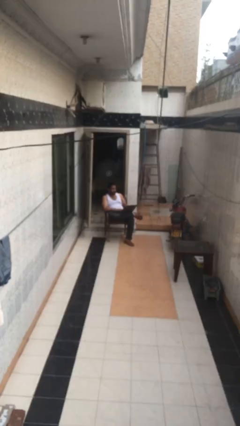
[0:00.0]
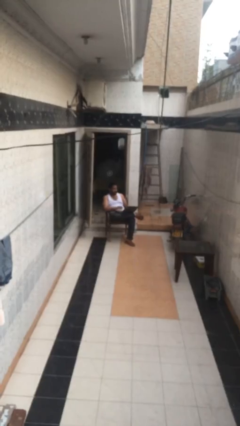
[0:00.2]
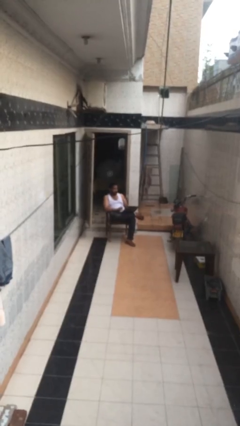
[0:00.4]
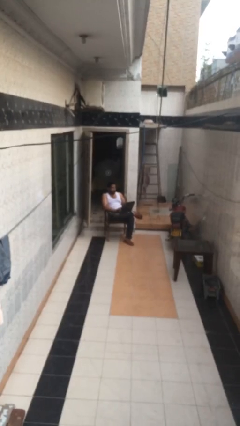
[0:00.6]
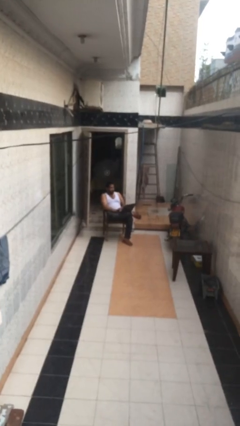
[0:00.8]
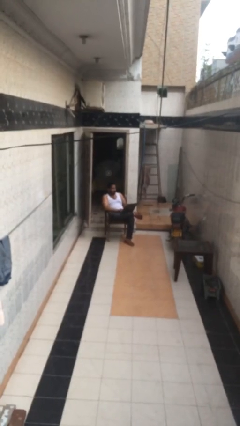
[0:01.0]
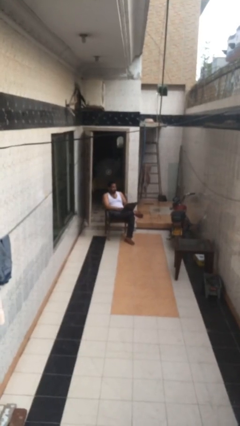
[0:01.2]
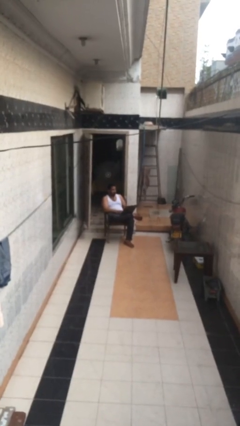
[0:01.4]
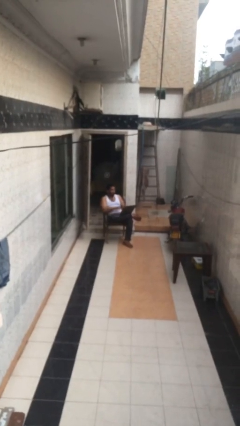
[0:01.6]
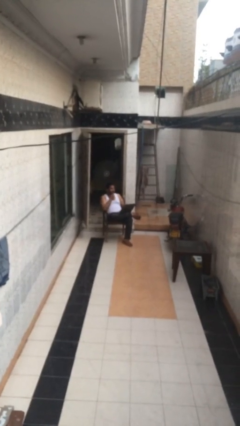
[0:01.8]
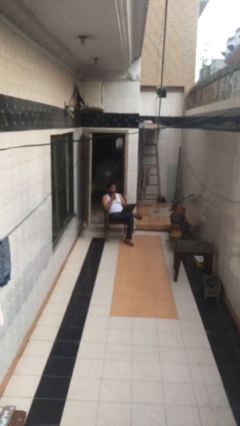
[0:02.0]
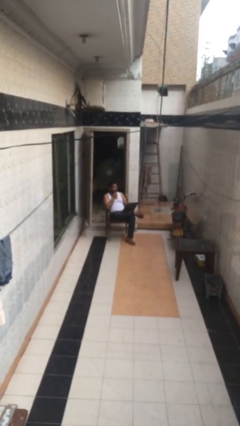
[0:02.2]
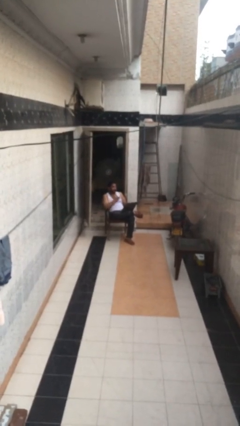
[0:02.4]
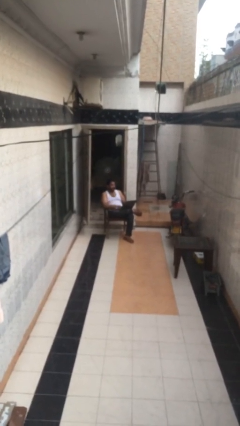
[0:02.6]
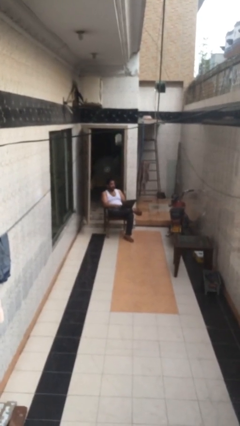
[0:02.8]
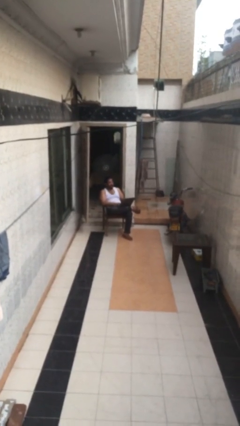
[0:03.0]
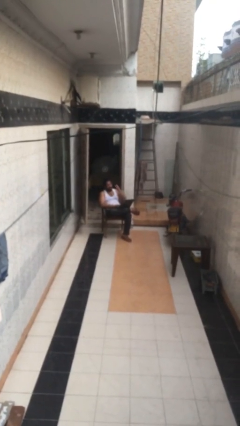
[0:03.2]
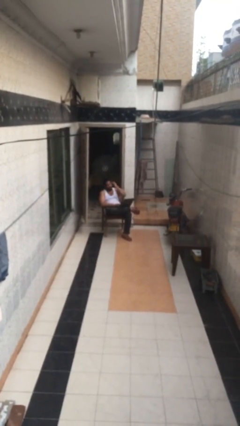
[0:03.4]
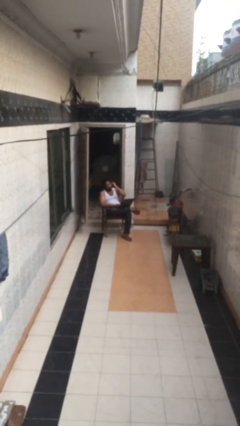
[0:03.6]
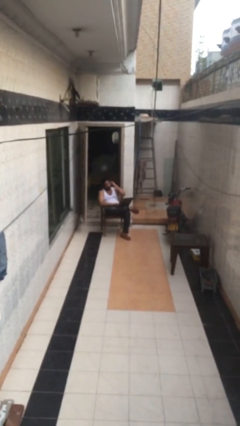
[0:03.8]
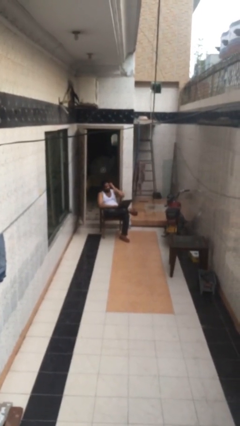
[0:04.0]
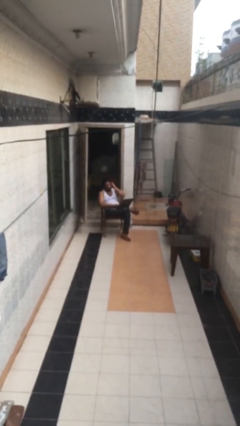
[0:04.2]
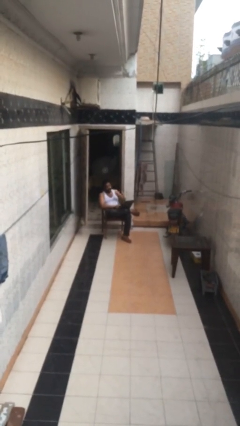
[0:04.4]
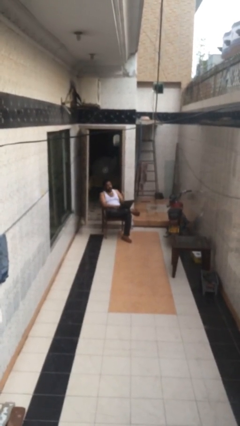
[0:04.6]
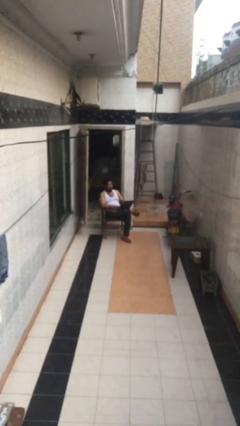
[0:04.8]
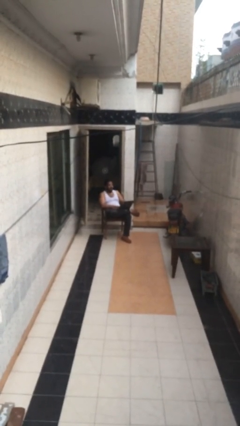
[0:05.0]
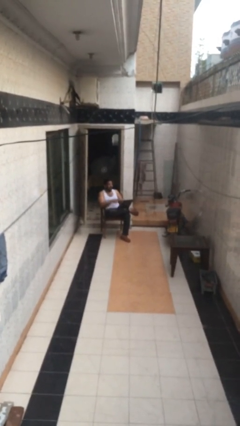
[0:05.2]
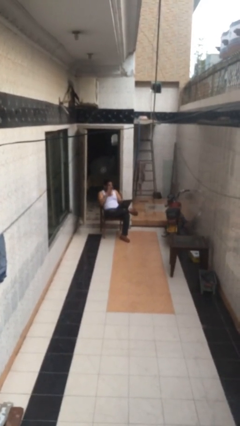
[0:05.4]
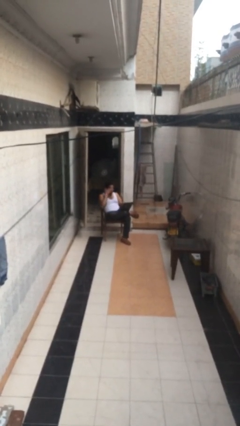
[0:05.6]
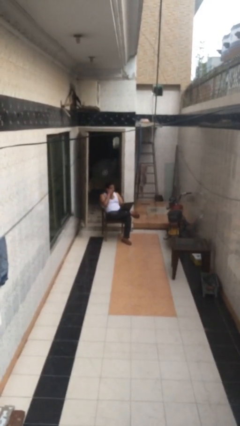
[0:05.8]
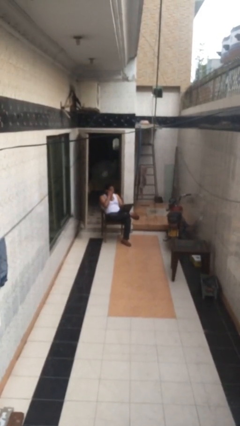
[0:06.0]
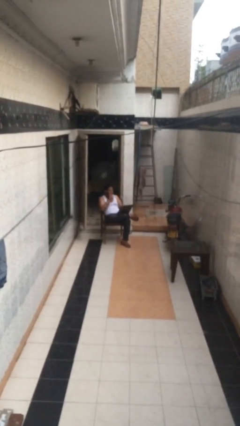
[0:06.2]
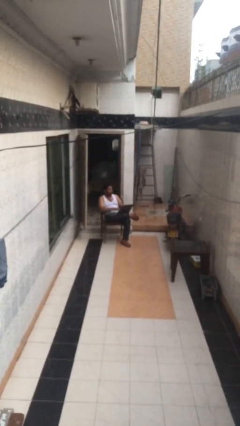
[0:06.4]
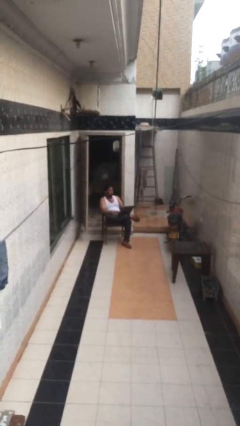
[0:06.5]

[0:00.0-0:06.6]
person interacts with laptop

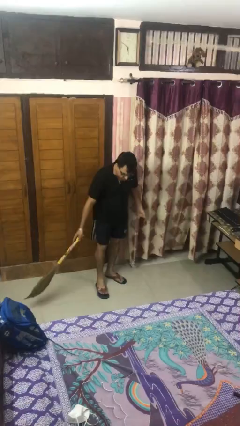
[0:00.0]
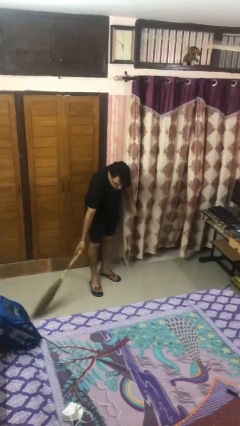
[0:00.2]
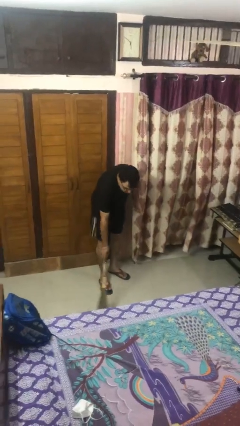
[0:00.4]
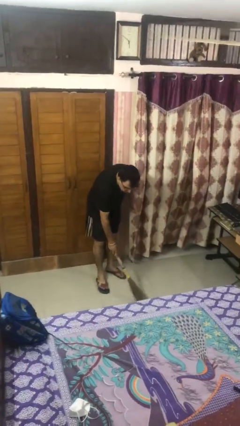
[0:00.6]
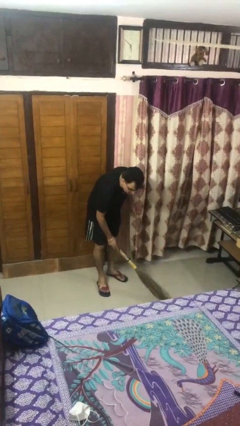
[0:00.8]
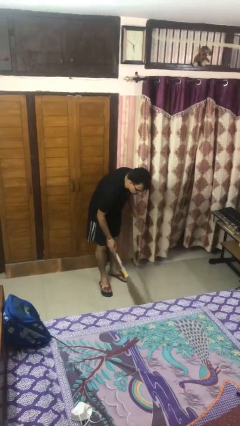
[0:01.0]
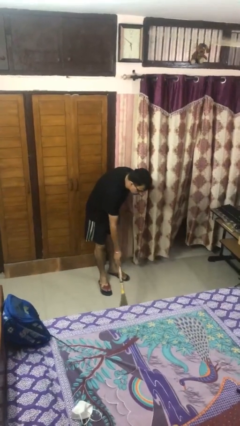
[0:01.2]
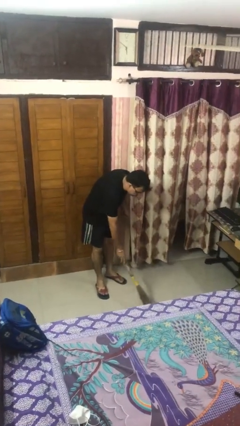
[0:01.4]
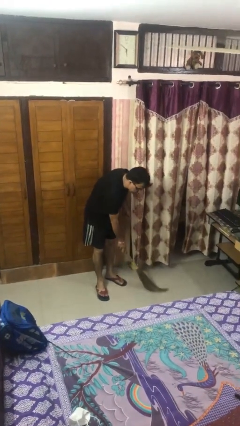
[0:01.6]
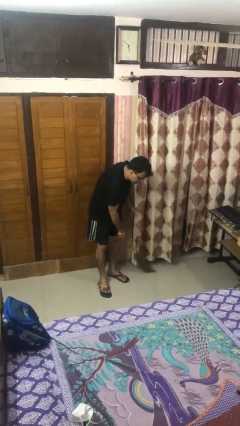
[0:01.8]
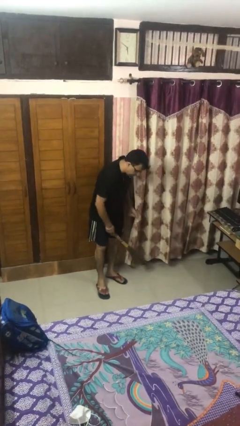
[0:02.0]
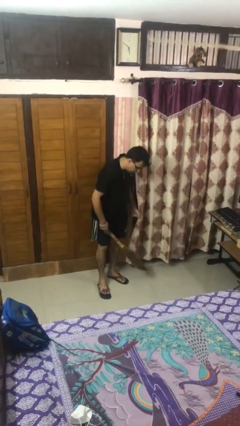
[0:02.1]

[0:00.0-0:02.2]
person sweeps floor

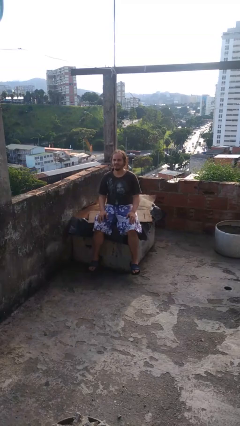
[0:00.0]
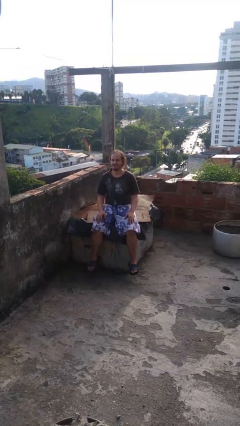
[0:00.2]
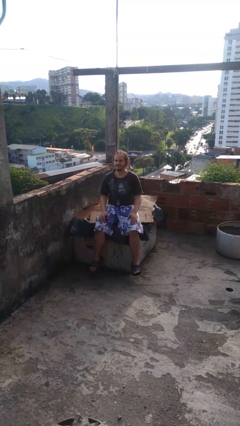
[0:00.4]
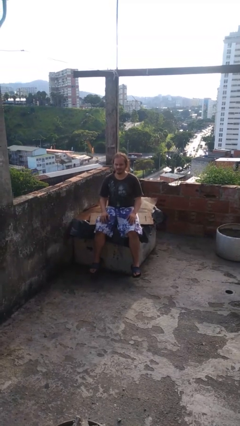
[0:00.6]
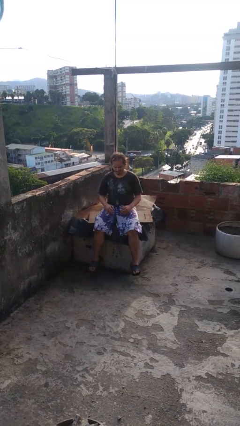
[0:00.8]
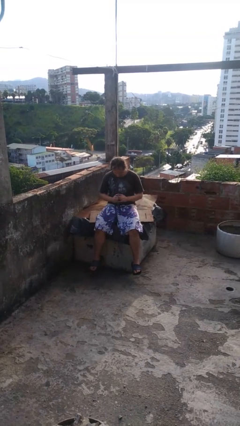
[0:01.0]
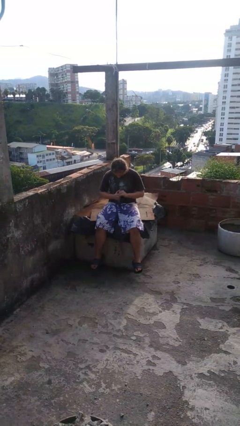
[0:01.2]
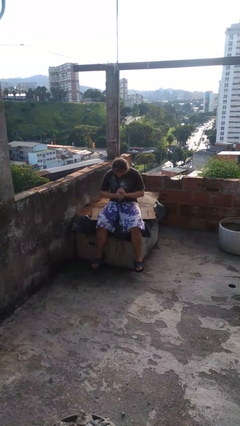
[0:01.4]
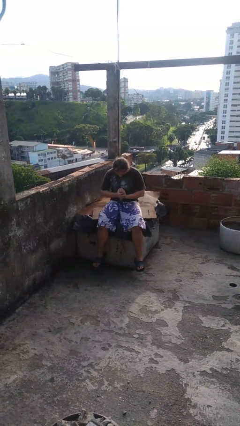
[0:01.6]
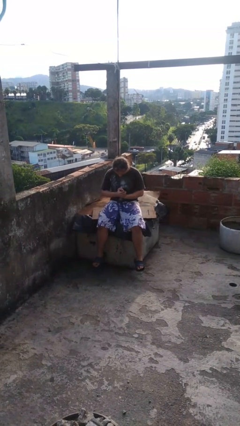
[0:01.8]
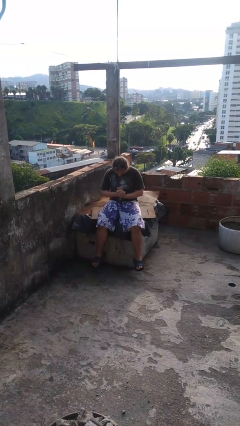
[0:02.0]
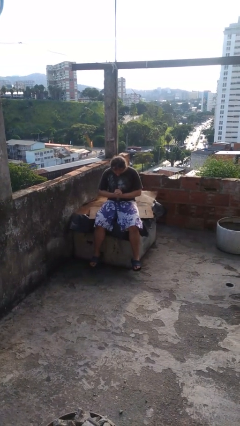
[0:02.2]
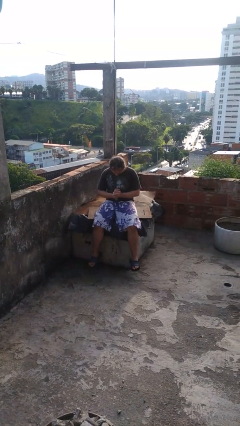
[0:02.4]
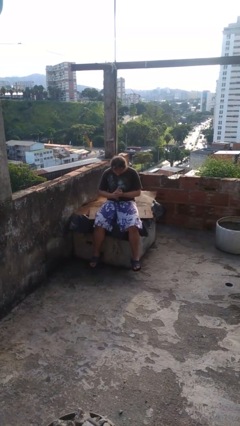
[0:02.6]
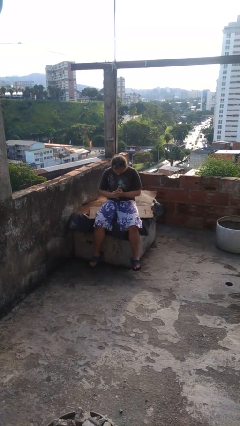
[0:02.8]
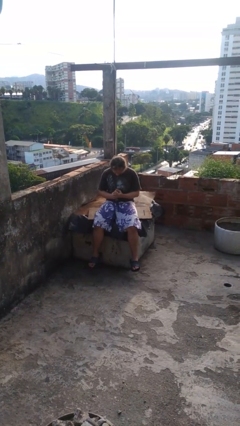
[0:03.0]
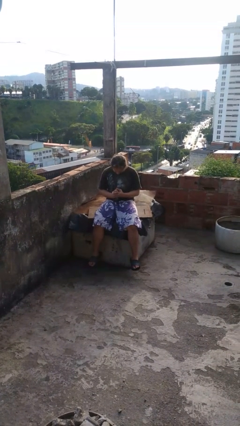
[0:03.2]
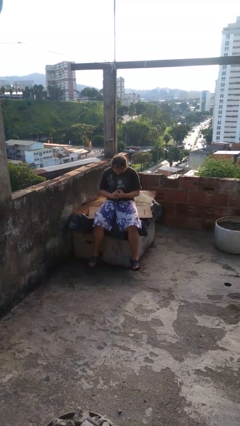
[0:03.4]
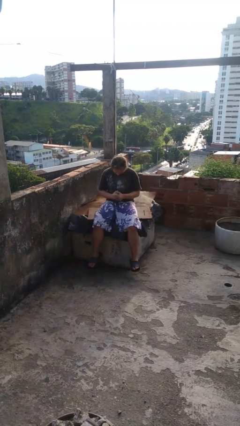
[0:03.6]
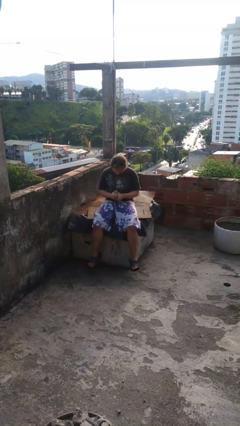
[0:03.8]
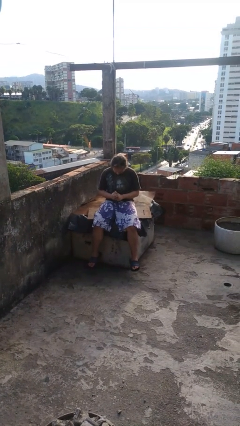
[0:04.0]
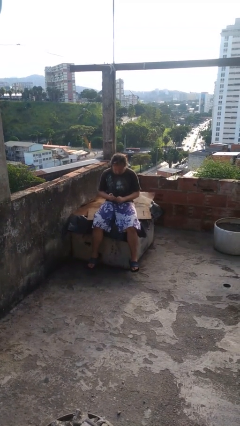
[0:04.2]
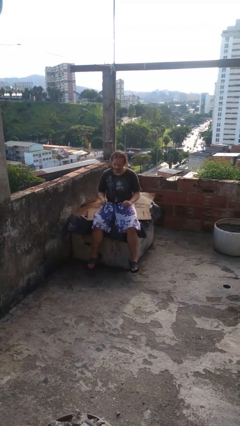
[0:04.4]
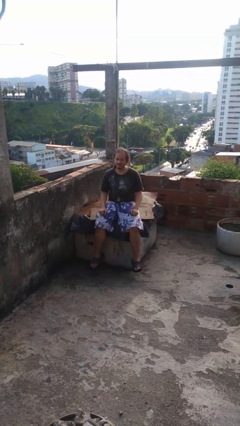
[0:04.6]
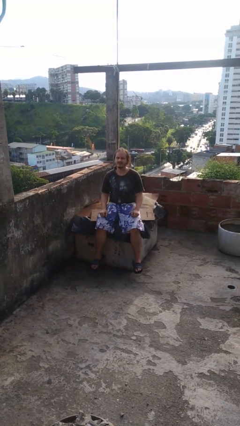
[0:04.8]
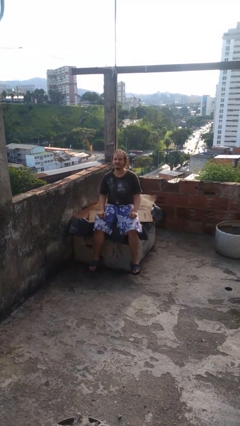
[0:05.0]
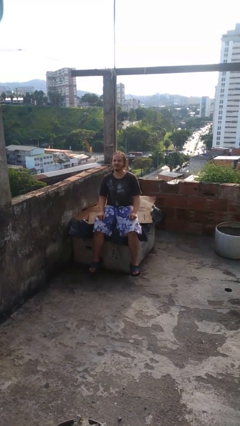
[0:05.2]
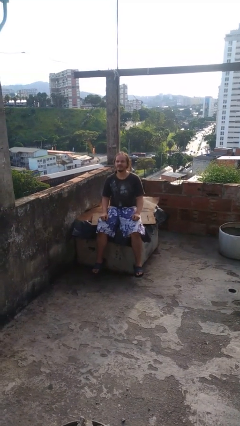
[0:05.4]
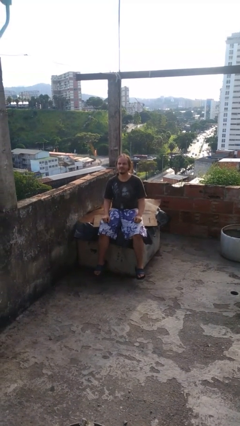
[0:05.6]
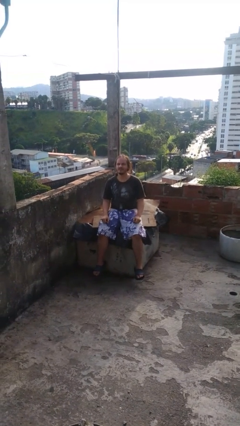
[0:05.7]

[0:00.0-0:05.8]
person looks at hands in lap

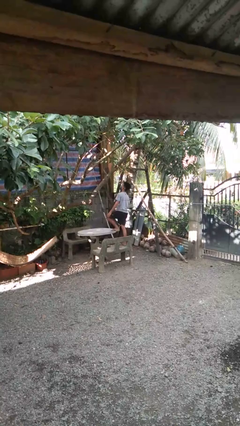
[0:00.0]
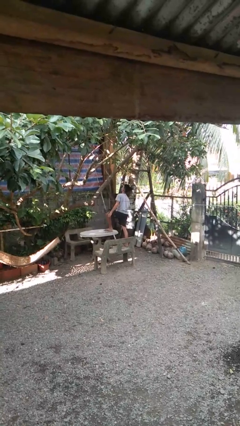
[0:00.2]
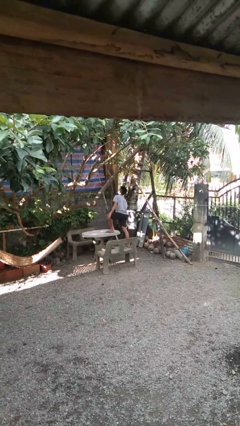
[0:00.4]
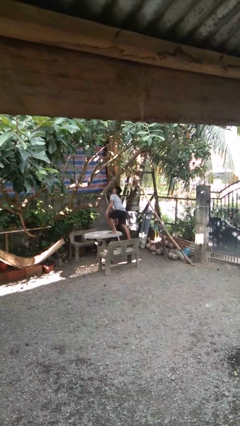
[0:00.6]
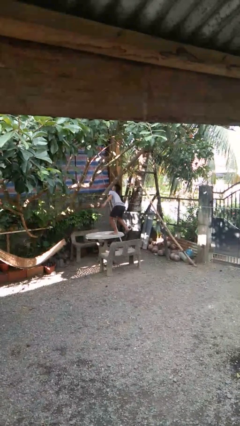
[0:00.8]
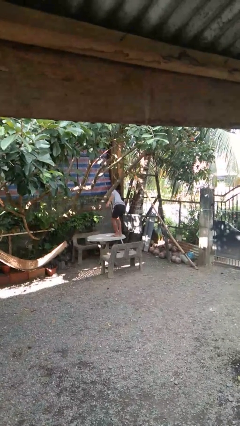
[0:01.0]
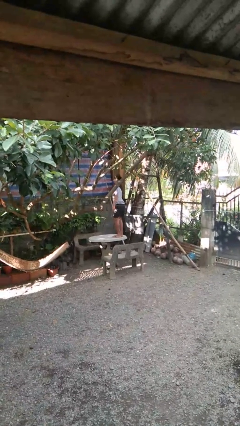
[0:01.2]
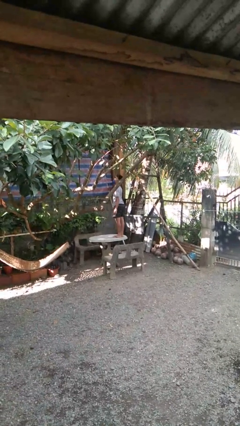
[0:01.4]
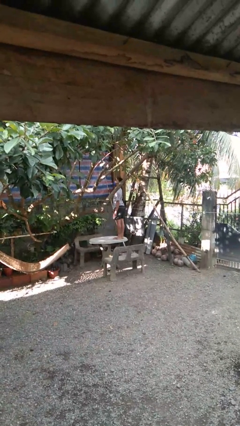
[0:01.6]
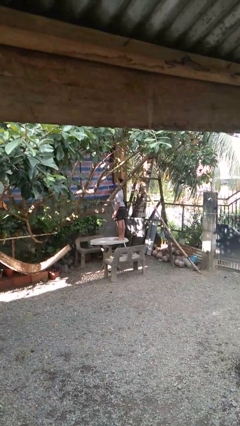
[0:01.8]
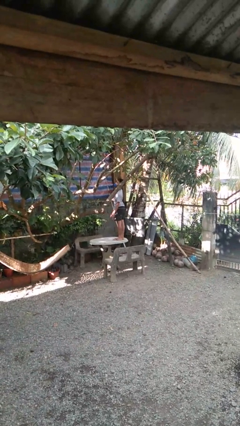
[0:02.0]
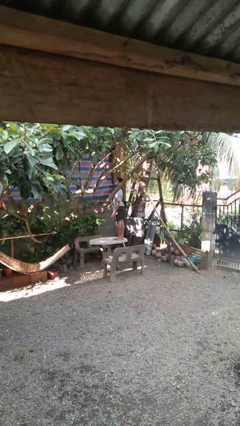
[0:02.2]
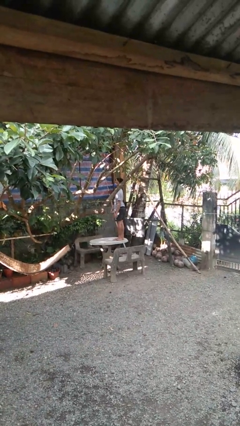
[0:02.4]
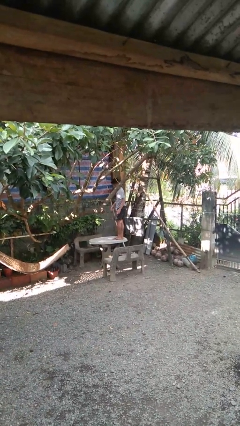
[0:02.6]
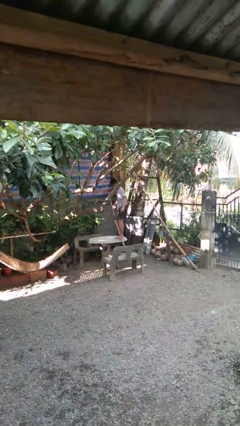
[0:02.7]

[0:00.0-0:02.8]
person climbs on table

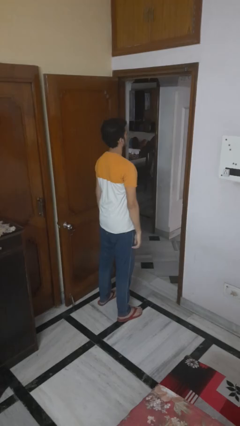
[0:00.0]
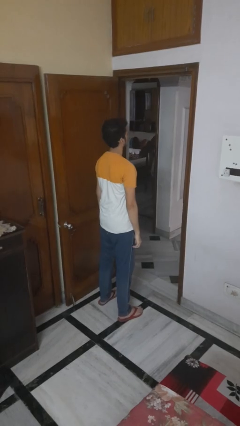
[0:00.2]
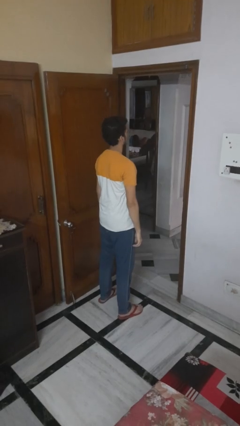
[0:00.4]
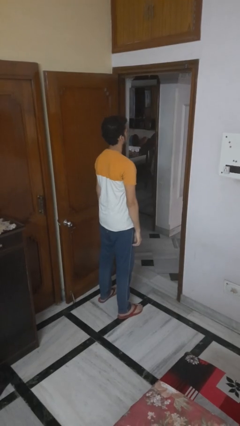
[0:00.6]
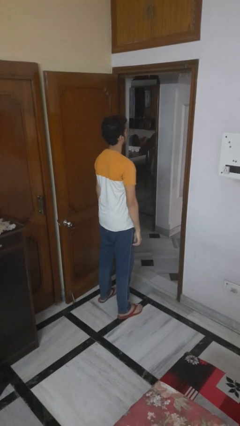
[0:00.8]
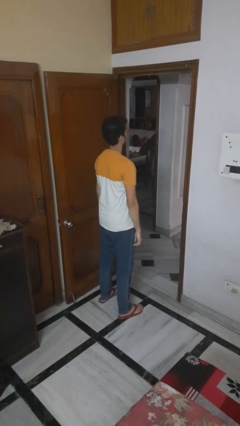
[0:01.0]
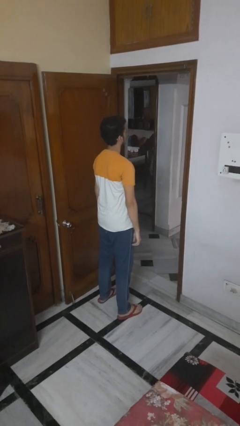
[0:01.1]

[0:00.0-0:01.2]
person crosses arms
